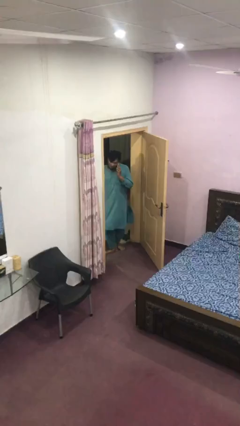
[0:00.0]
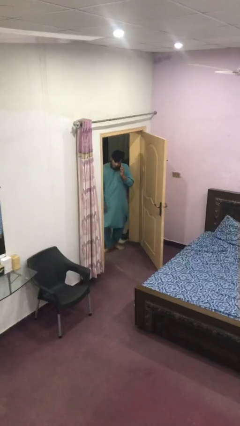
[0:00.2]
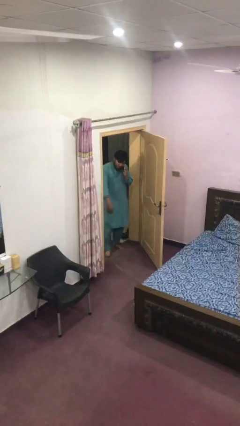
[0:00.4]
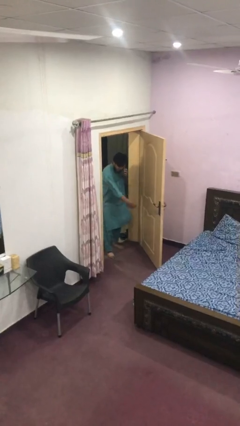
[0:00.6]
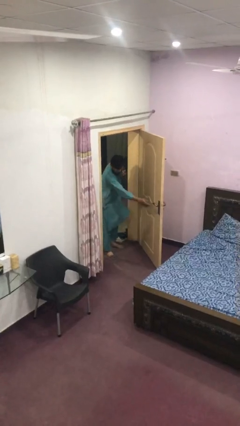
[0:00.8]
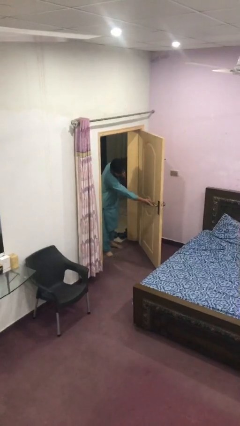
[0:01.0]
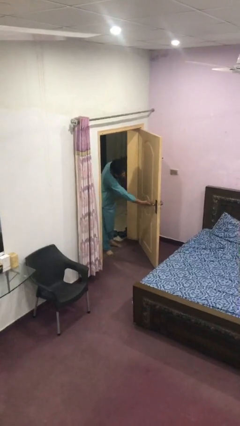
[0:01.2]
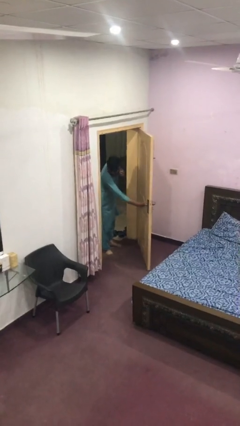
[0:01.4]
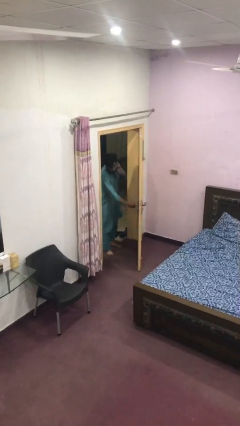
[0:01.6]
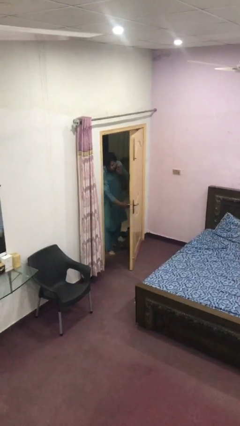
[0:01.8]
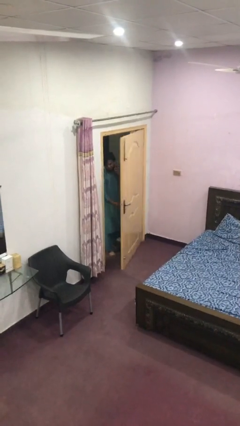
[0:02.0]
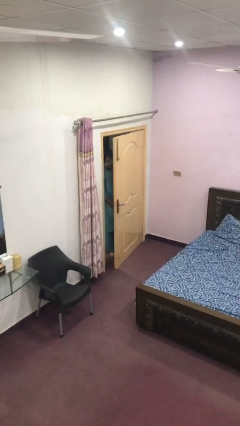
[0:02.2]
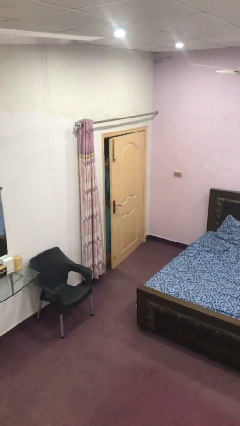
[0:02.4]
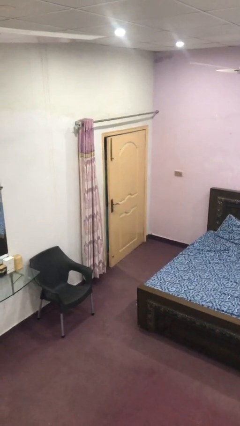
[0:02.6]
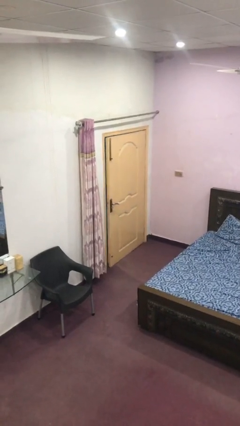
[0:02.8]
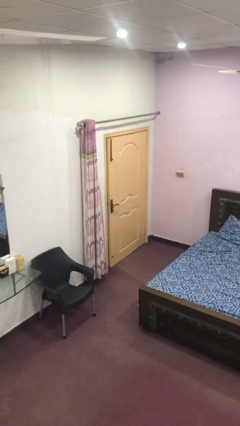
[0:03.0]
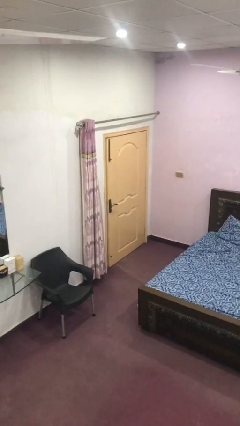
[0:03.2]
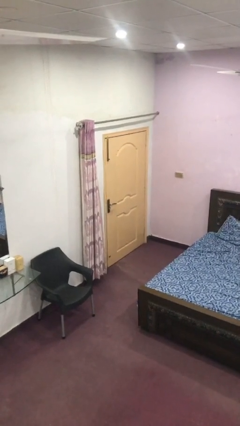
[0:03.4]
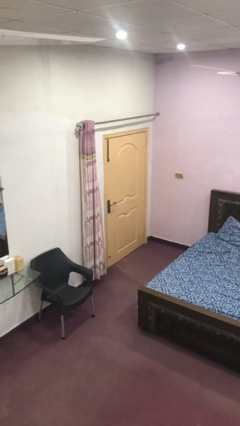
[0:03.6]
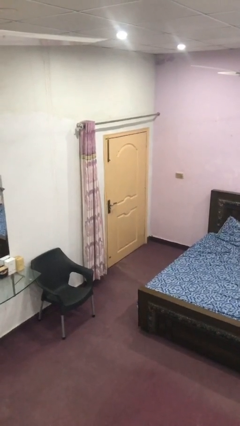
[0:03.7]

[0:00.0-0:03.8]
person closes facility door

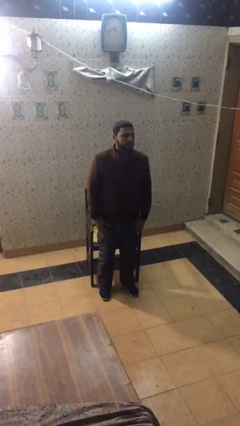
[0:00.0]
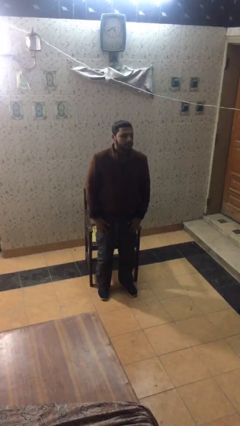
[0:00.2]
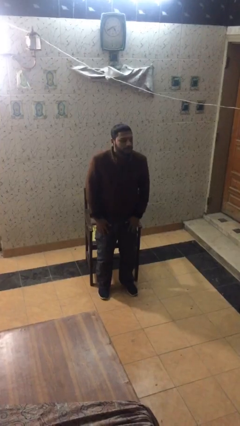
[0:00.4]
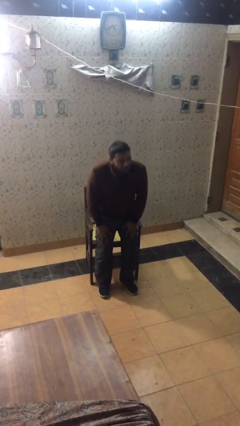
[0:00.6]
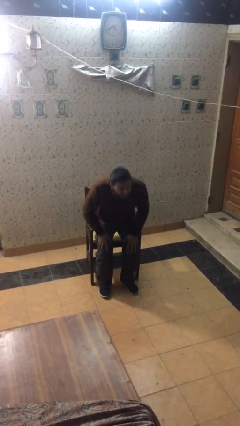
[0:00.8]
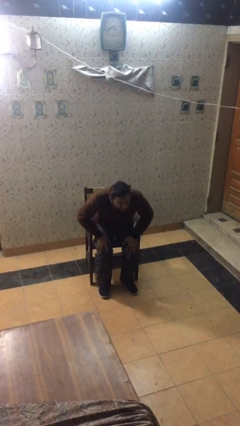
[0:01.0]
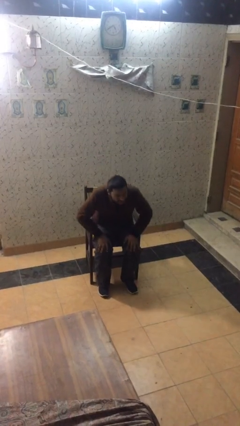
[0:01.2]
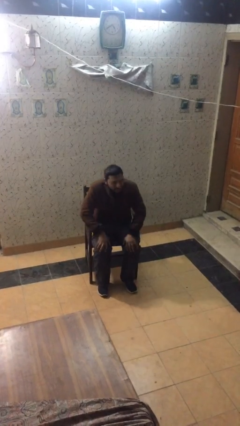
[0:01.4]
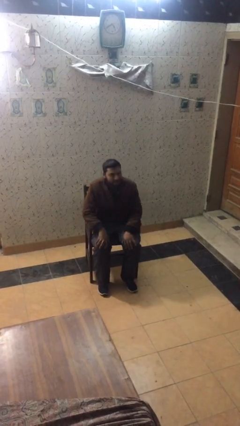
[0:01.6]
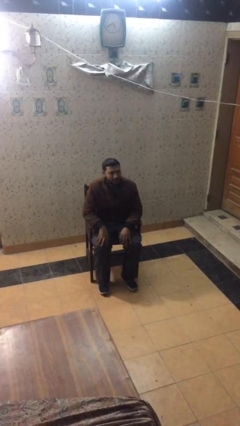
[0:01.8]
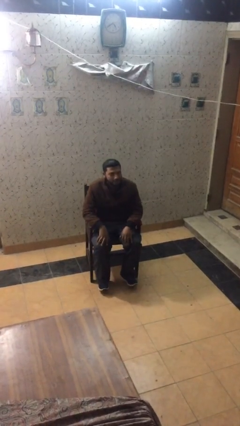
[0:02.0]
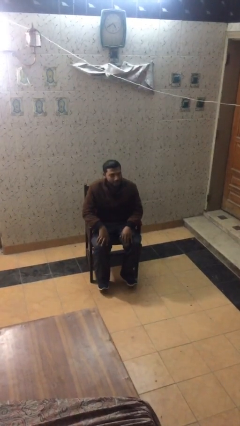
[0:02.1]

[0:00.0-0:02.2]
person sits down

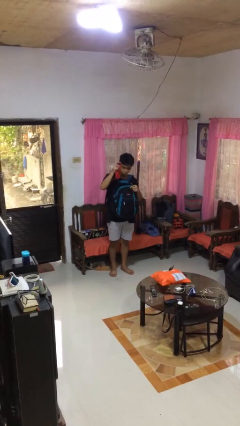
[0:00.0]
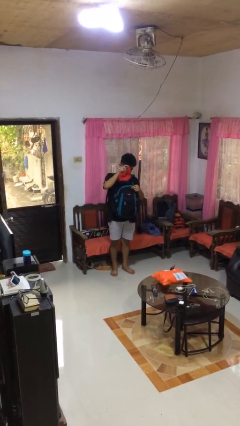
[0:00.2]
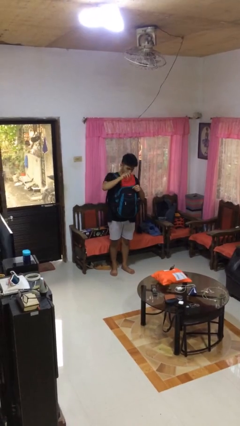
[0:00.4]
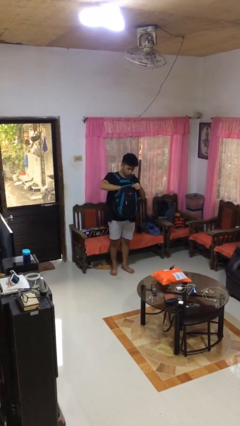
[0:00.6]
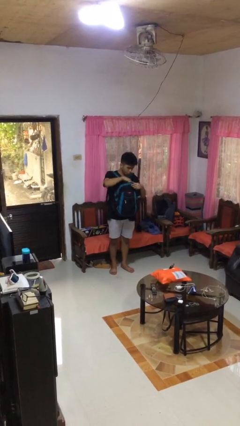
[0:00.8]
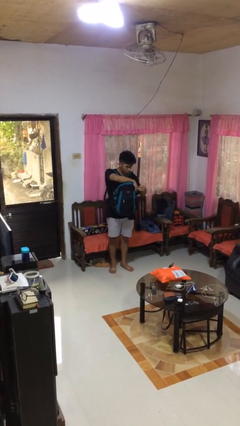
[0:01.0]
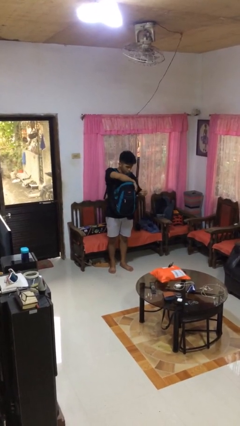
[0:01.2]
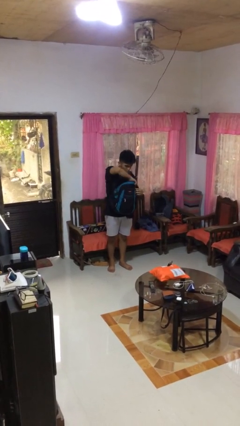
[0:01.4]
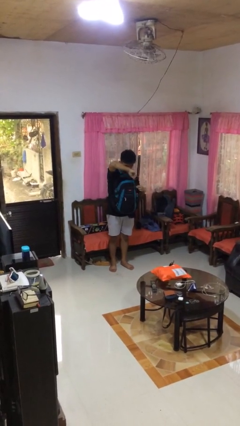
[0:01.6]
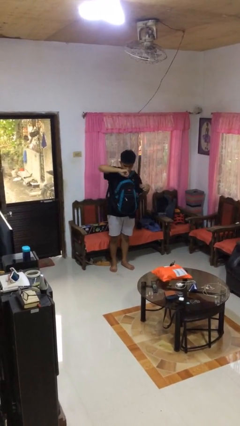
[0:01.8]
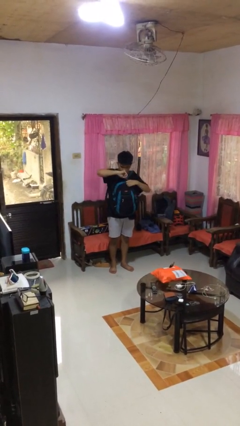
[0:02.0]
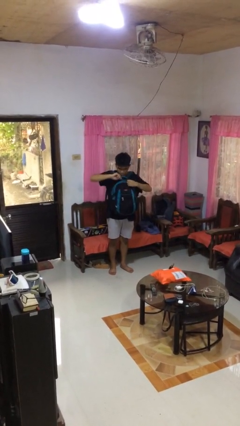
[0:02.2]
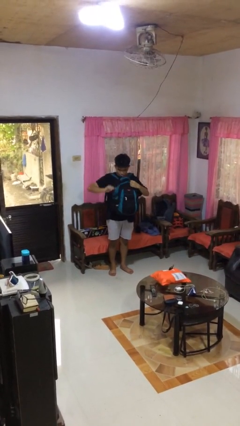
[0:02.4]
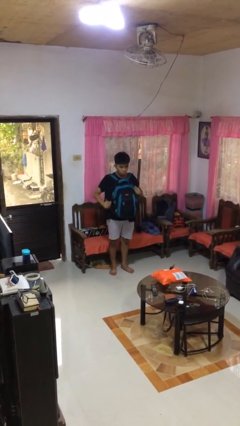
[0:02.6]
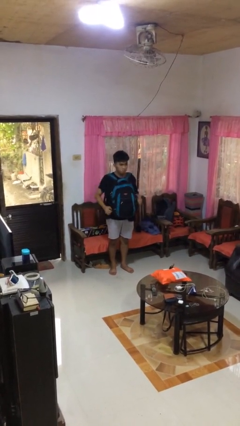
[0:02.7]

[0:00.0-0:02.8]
person puts object into backpack

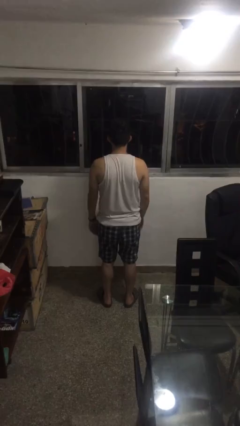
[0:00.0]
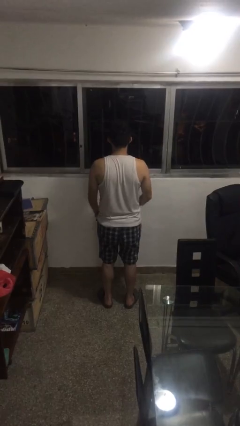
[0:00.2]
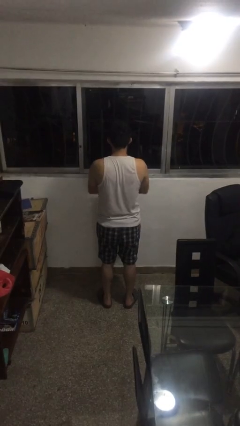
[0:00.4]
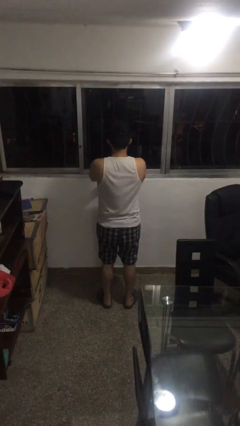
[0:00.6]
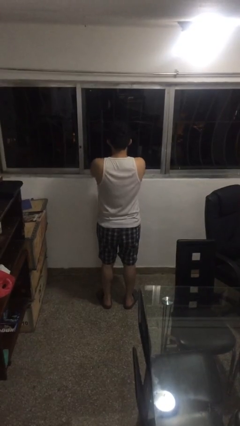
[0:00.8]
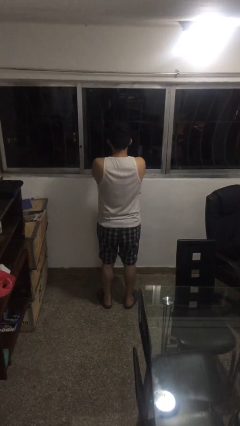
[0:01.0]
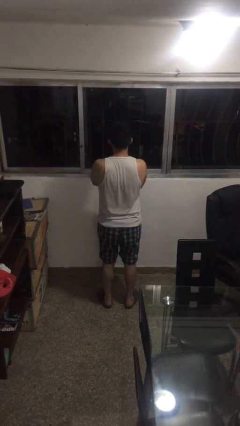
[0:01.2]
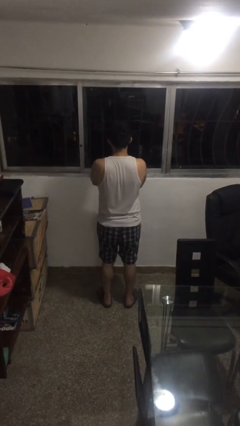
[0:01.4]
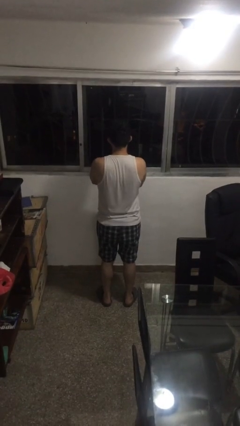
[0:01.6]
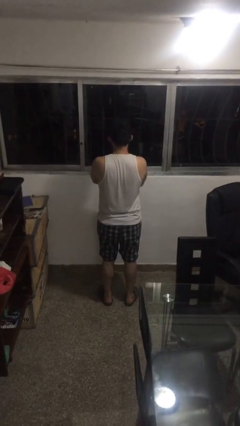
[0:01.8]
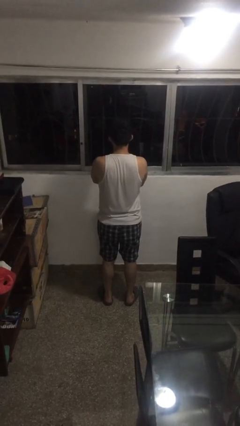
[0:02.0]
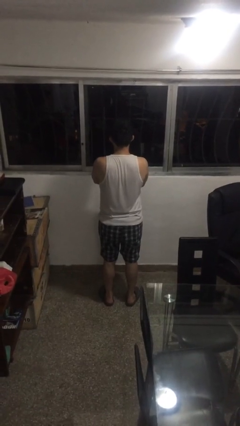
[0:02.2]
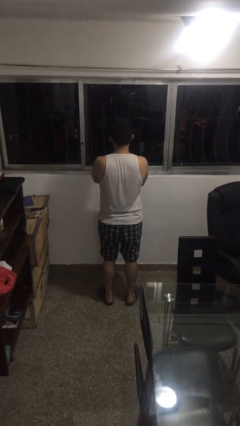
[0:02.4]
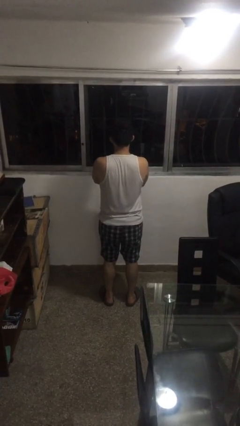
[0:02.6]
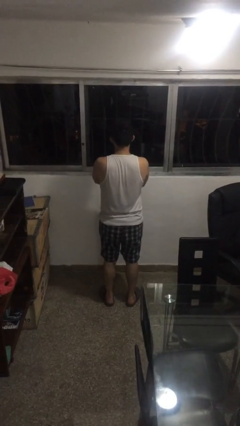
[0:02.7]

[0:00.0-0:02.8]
person crosses arms

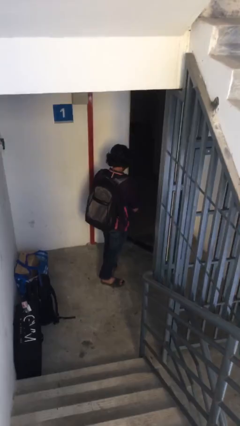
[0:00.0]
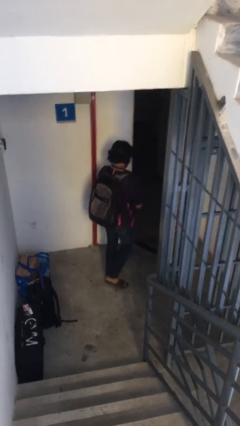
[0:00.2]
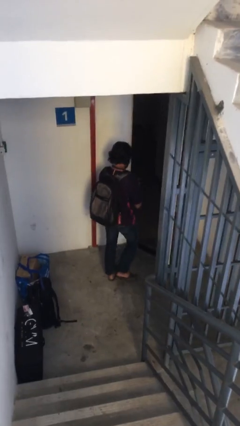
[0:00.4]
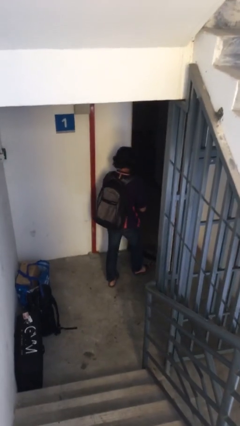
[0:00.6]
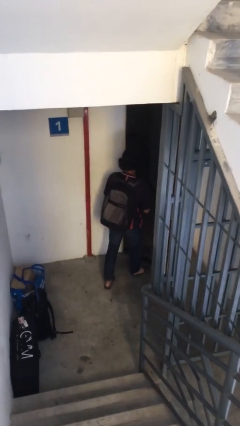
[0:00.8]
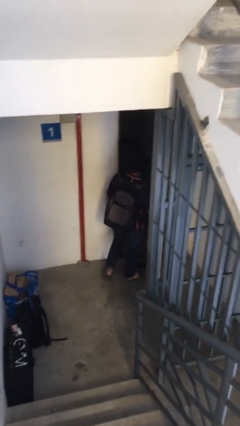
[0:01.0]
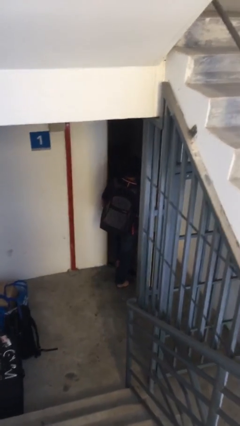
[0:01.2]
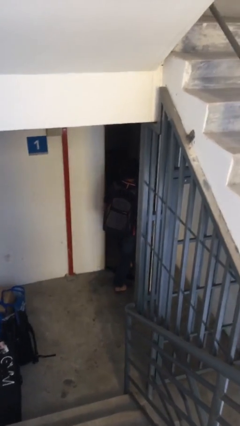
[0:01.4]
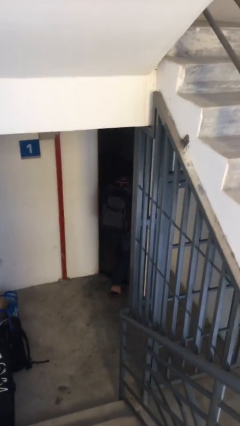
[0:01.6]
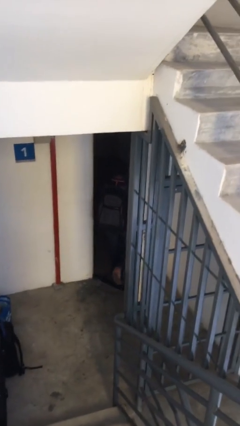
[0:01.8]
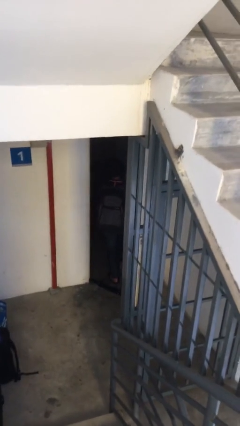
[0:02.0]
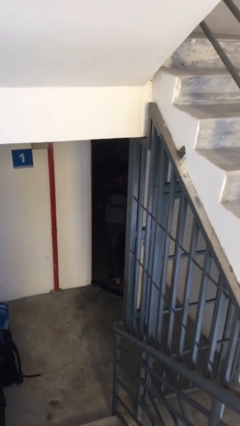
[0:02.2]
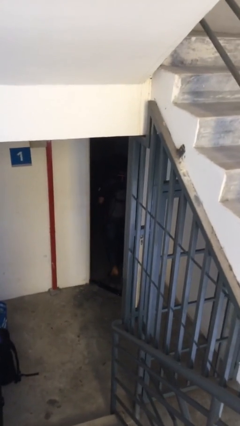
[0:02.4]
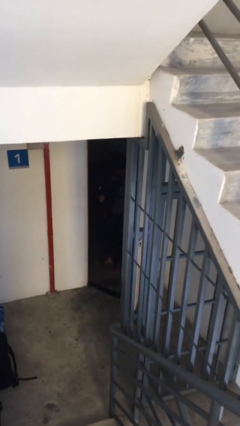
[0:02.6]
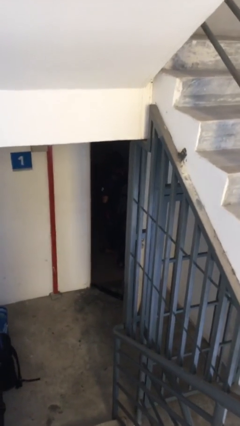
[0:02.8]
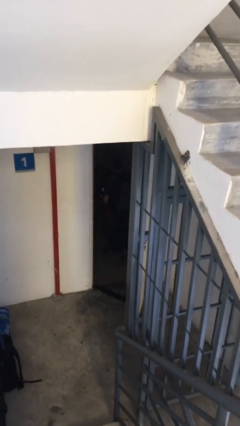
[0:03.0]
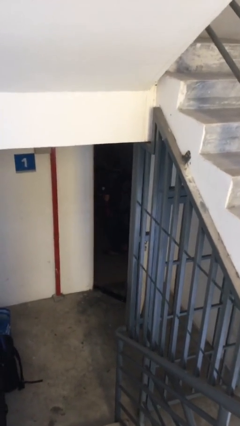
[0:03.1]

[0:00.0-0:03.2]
person exits scene through structure

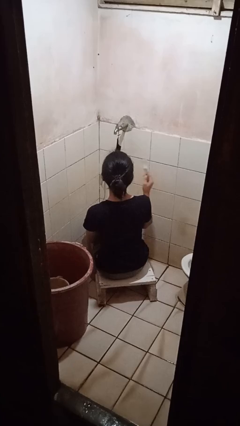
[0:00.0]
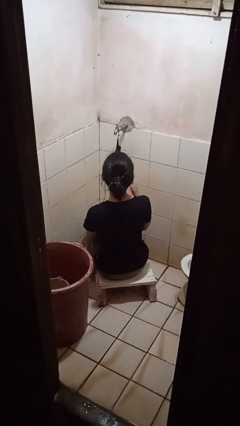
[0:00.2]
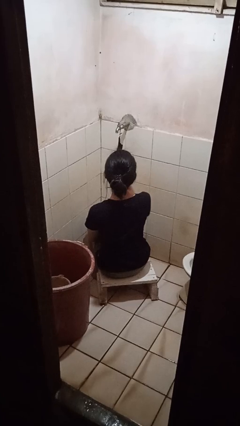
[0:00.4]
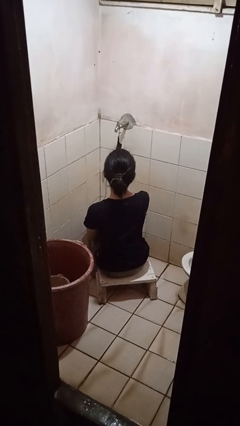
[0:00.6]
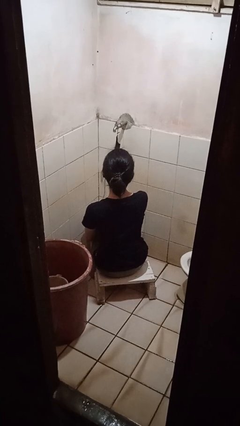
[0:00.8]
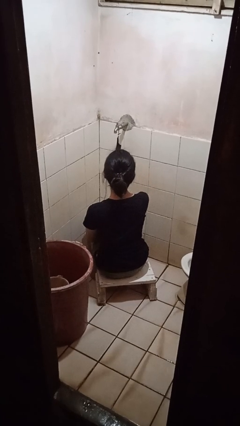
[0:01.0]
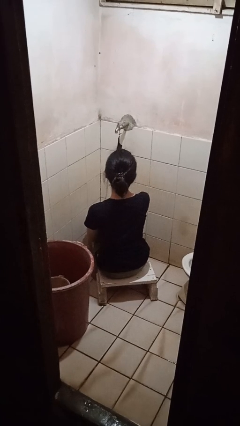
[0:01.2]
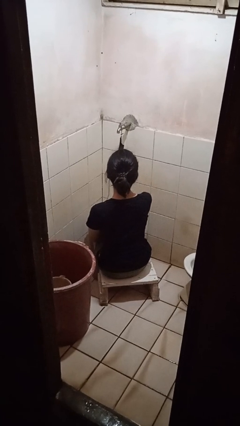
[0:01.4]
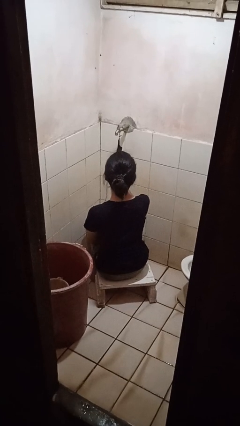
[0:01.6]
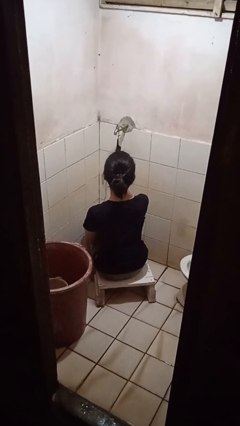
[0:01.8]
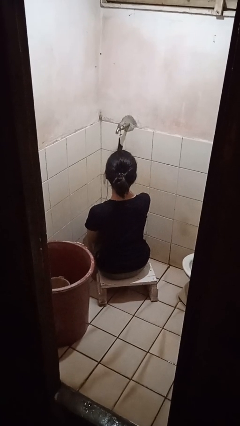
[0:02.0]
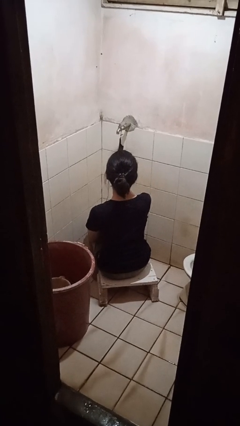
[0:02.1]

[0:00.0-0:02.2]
person brushes teeth

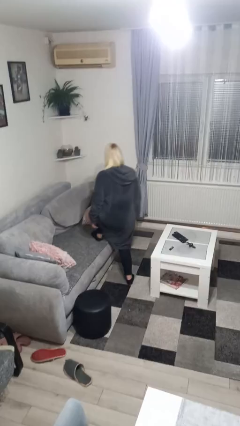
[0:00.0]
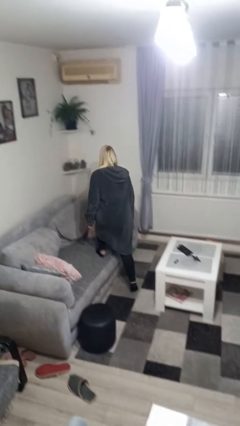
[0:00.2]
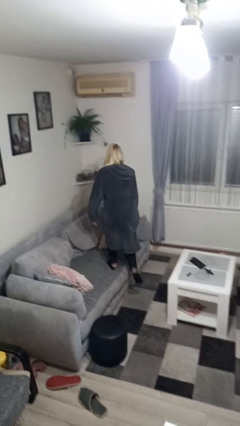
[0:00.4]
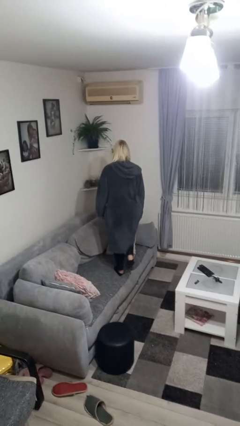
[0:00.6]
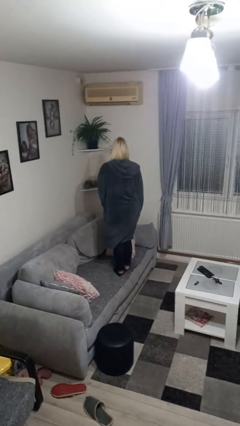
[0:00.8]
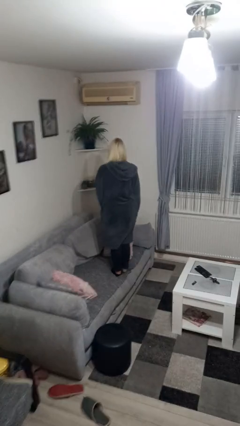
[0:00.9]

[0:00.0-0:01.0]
person climbs on couch
